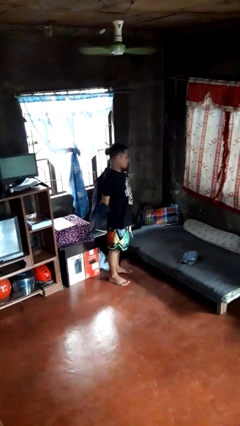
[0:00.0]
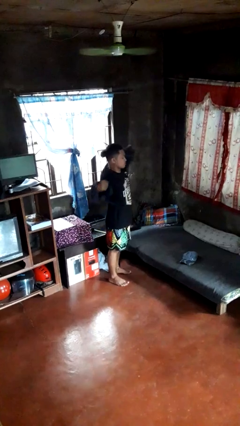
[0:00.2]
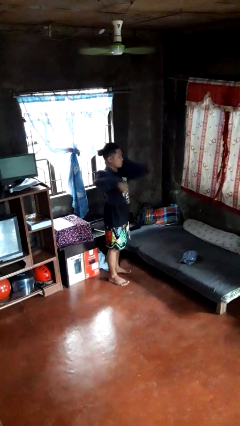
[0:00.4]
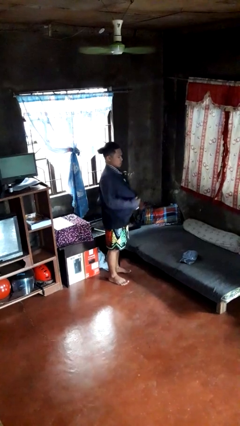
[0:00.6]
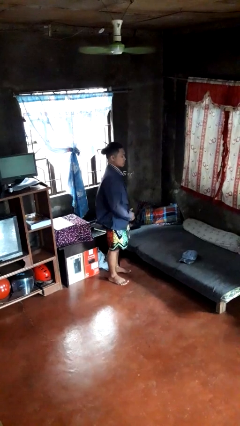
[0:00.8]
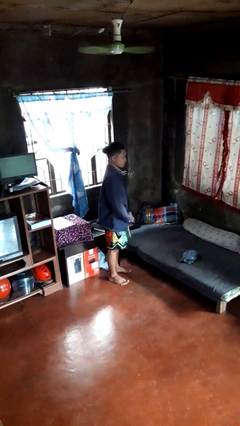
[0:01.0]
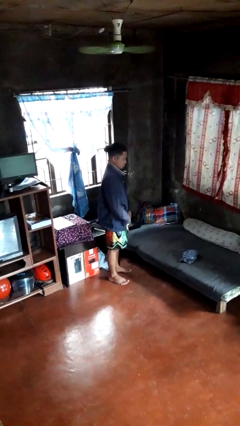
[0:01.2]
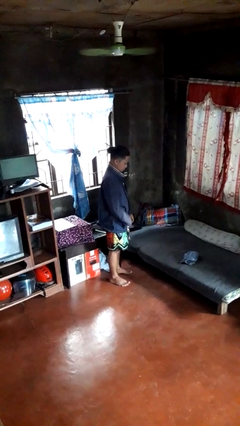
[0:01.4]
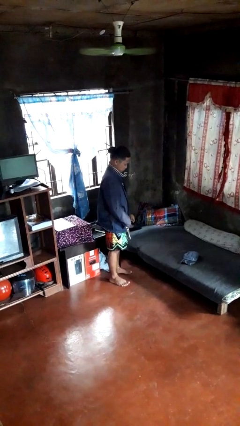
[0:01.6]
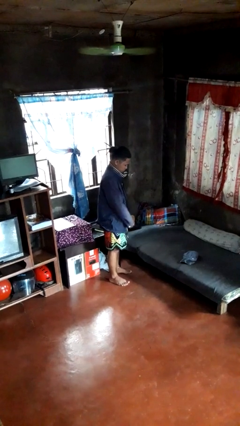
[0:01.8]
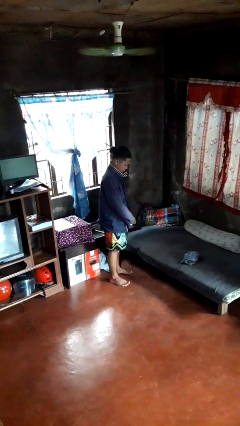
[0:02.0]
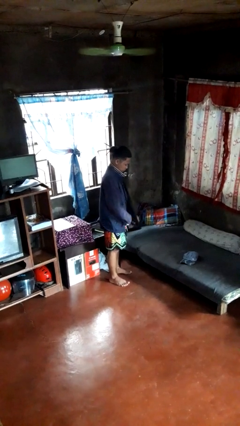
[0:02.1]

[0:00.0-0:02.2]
person puts on jacket

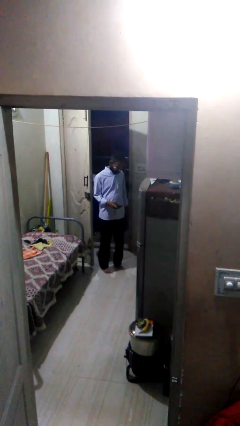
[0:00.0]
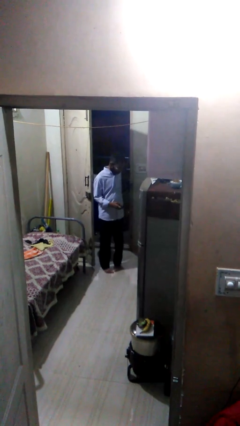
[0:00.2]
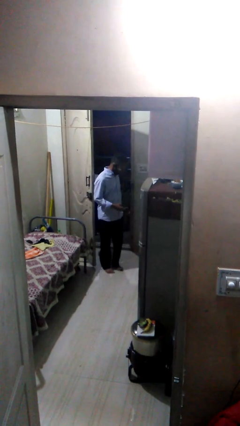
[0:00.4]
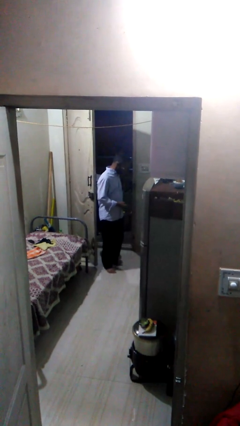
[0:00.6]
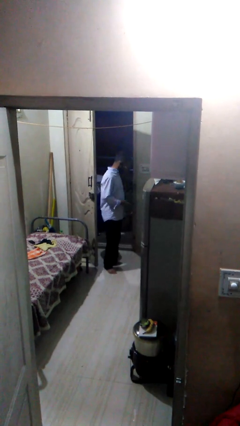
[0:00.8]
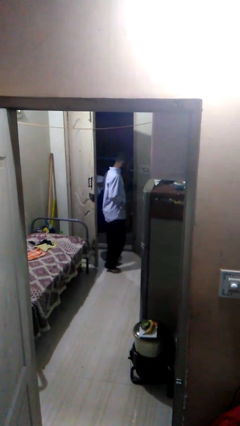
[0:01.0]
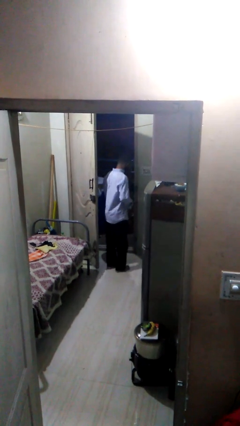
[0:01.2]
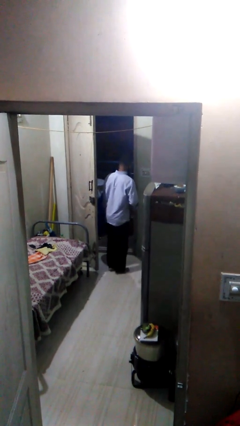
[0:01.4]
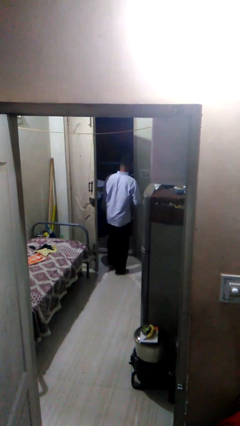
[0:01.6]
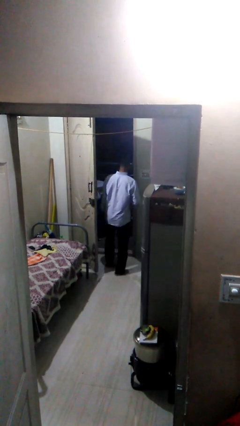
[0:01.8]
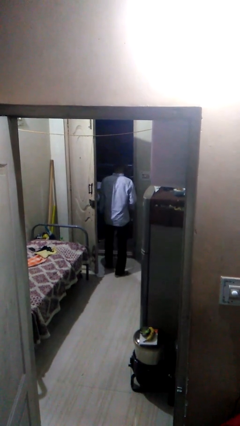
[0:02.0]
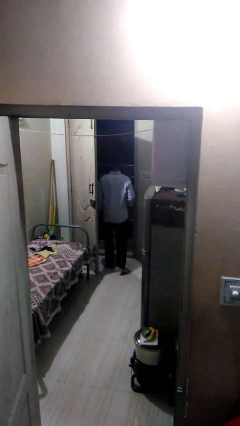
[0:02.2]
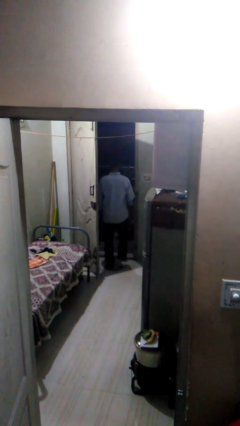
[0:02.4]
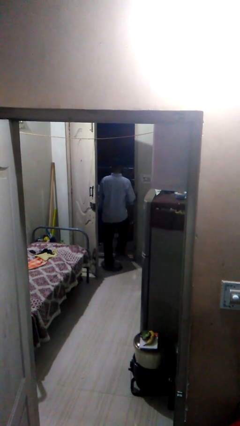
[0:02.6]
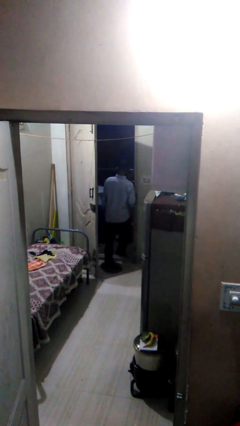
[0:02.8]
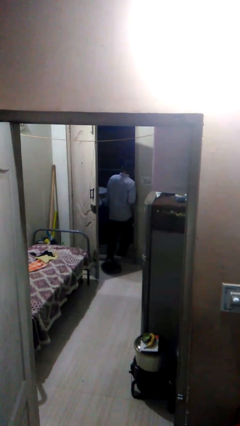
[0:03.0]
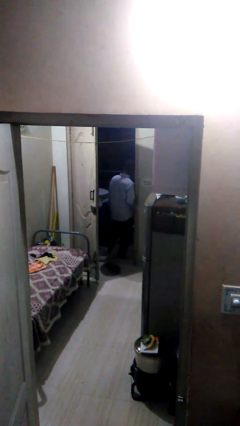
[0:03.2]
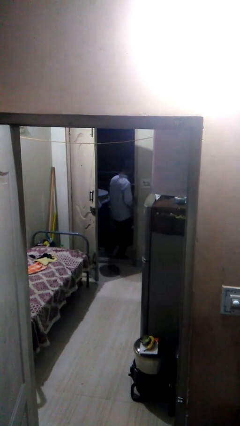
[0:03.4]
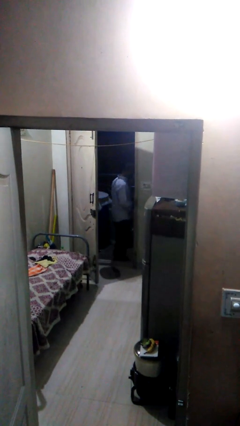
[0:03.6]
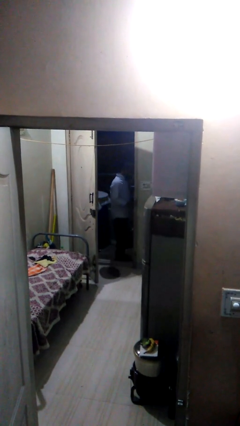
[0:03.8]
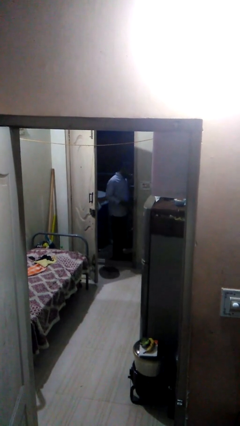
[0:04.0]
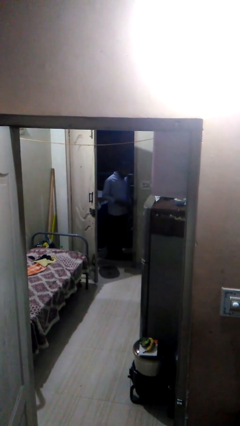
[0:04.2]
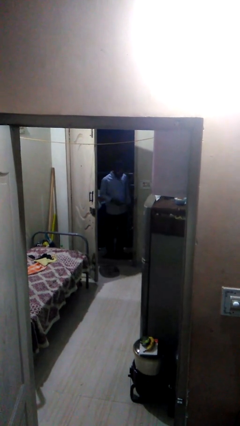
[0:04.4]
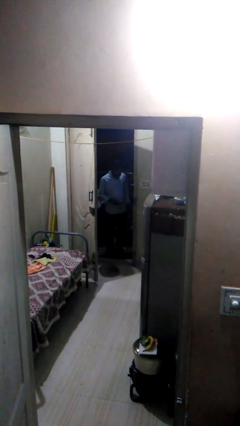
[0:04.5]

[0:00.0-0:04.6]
person exits scene through structure

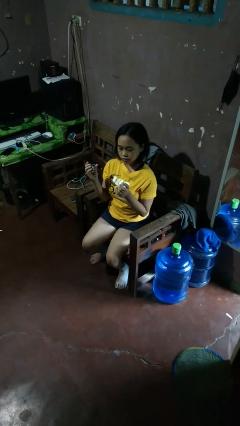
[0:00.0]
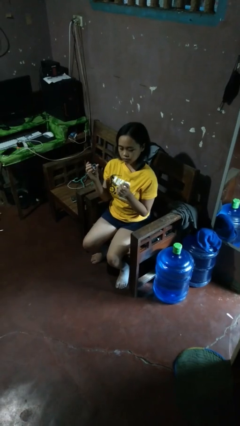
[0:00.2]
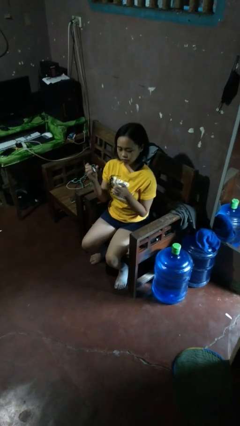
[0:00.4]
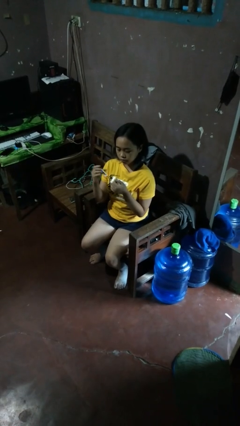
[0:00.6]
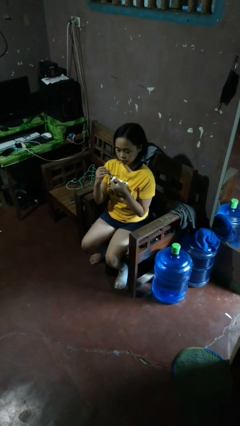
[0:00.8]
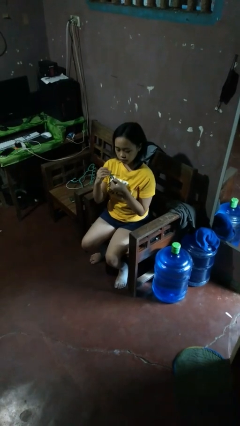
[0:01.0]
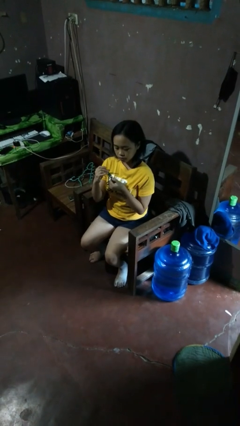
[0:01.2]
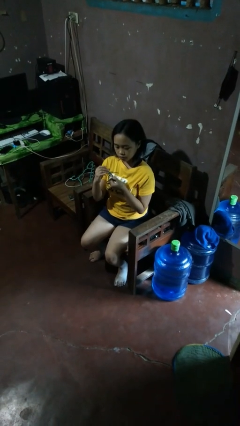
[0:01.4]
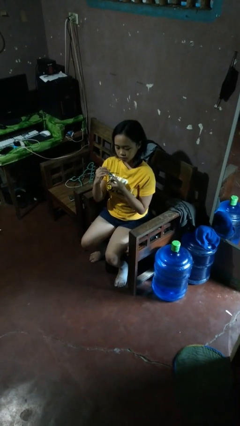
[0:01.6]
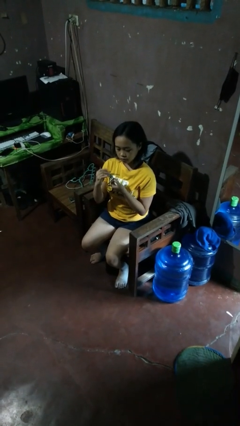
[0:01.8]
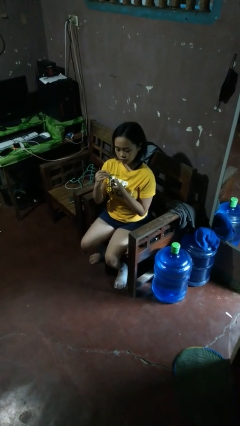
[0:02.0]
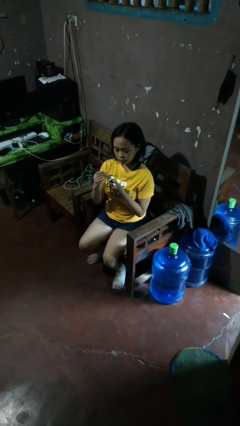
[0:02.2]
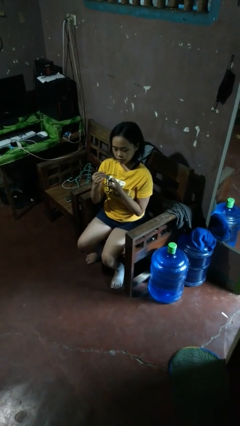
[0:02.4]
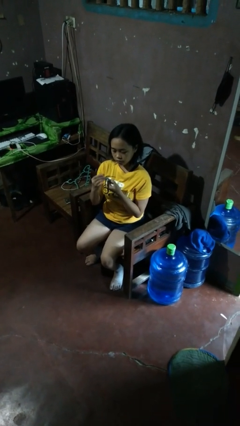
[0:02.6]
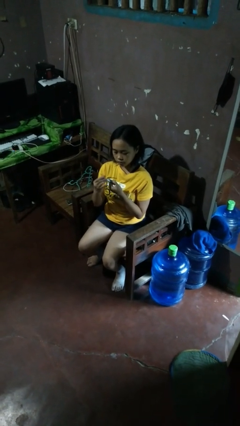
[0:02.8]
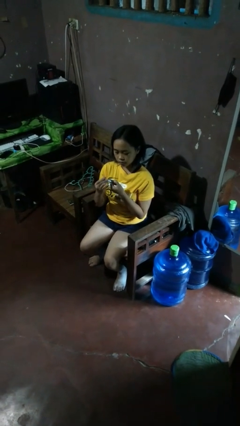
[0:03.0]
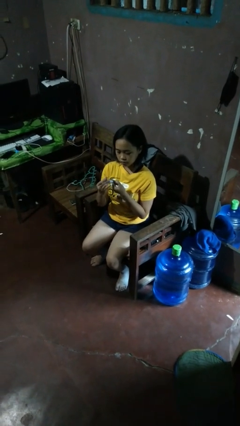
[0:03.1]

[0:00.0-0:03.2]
person clips fingernails

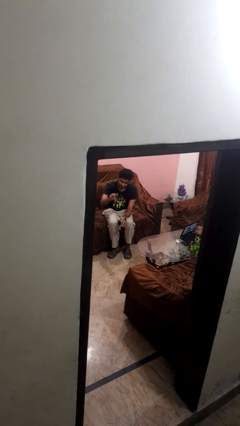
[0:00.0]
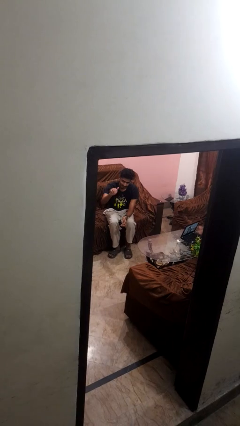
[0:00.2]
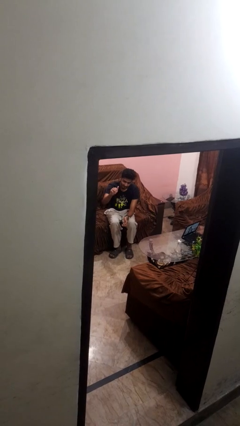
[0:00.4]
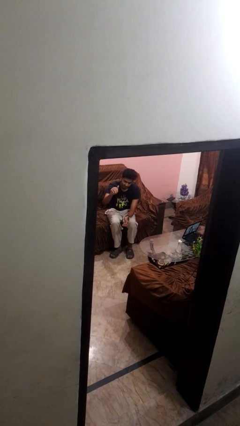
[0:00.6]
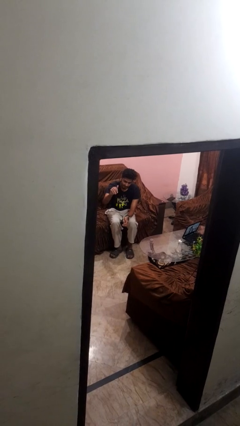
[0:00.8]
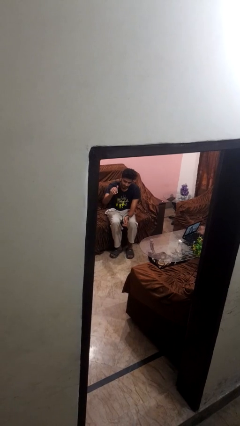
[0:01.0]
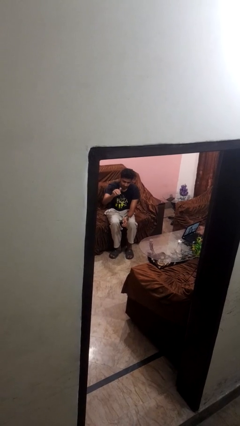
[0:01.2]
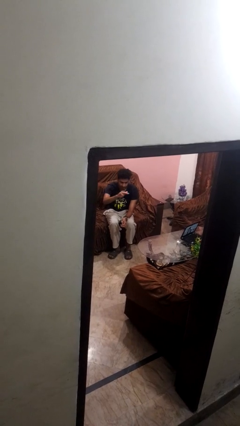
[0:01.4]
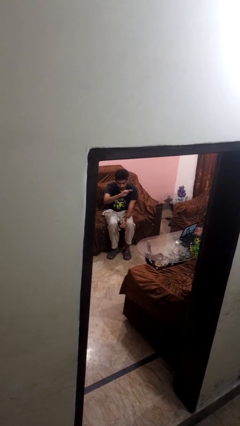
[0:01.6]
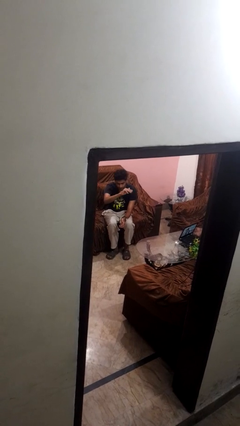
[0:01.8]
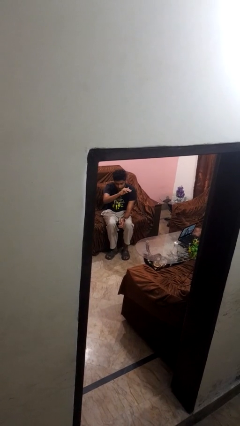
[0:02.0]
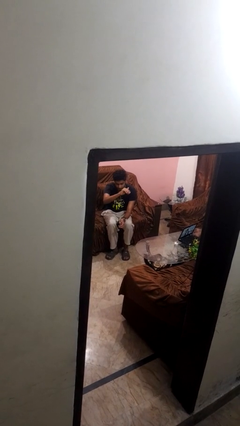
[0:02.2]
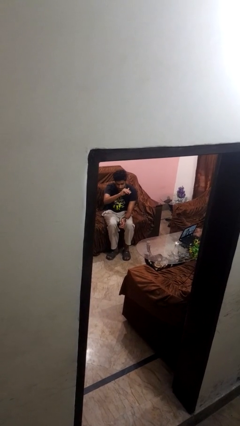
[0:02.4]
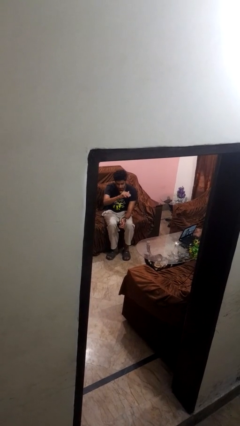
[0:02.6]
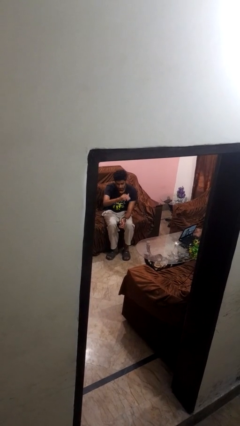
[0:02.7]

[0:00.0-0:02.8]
person gestures come here

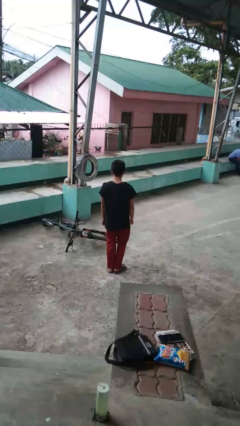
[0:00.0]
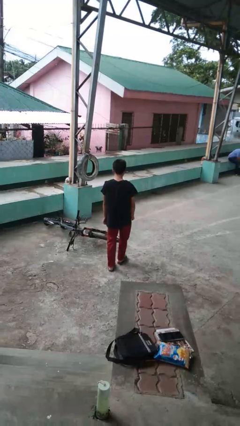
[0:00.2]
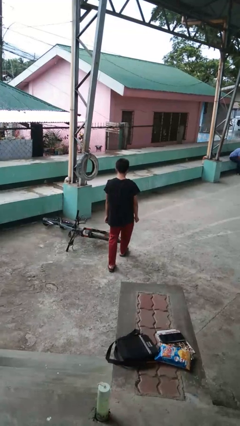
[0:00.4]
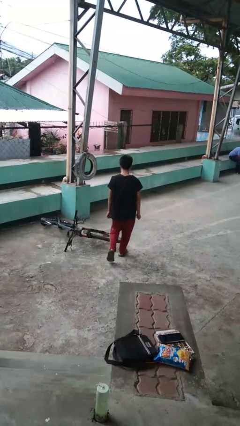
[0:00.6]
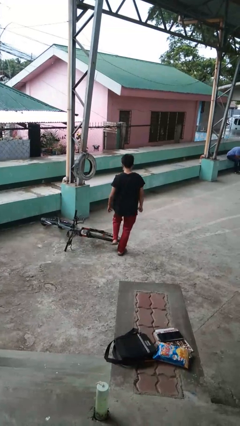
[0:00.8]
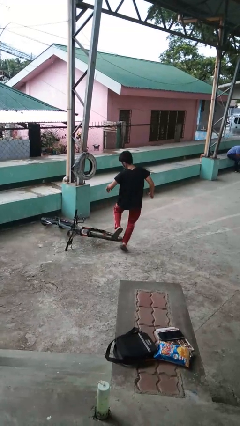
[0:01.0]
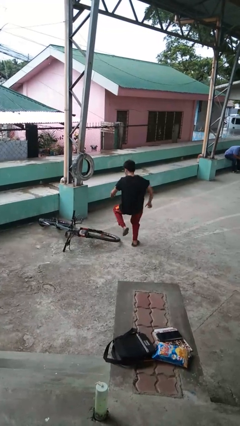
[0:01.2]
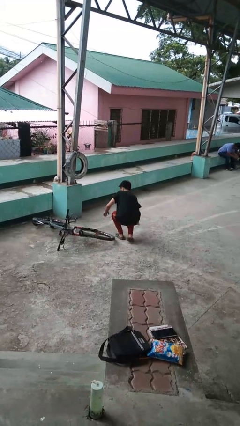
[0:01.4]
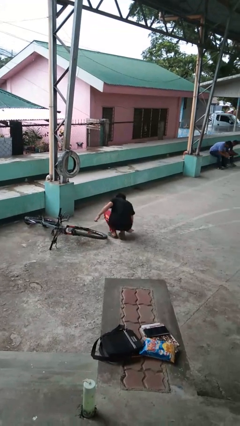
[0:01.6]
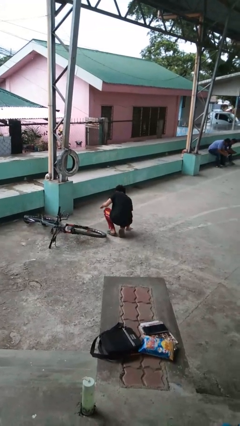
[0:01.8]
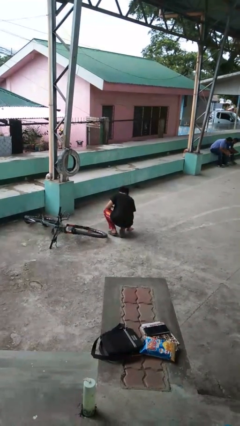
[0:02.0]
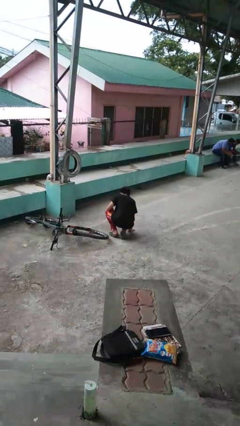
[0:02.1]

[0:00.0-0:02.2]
person trips on object on floor

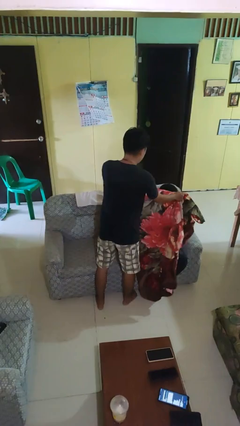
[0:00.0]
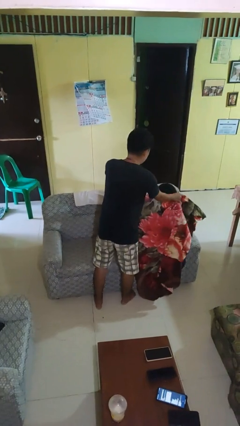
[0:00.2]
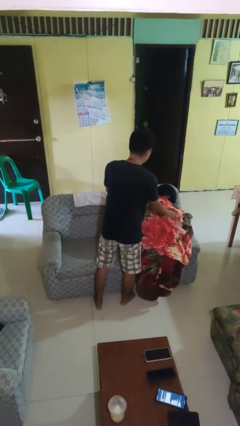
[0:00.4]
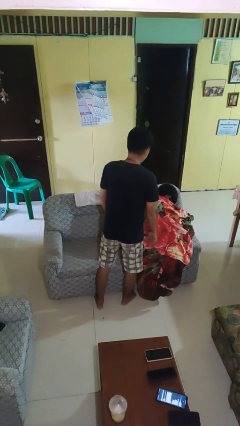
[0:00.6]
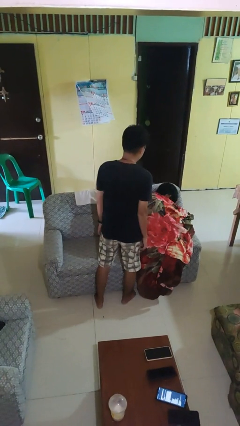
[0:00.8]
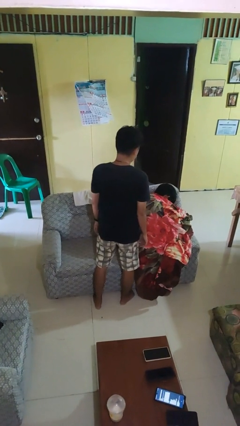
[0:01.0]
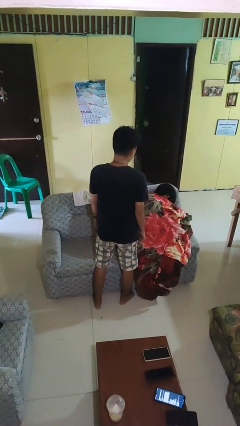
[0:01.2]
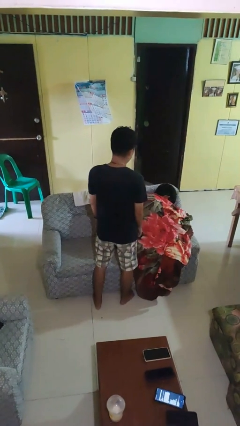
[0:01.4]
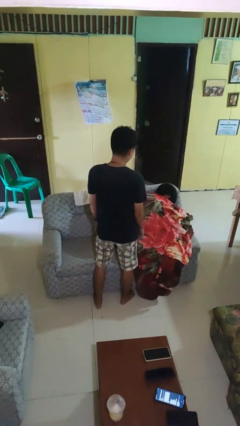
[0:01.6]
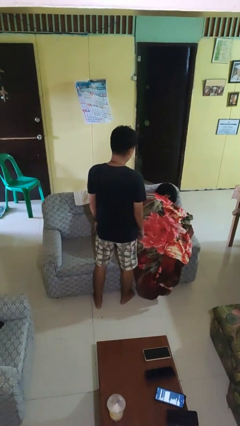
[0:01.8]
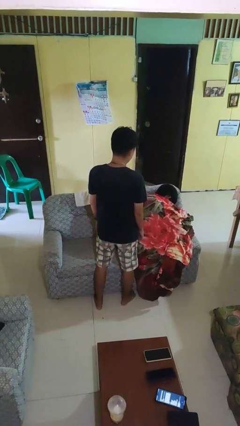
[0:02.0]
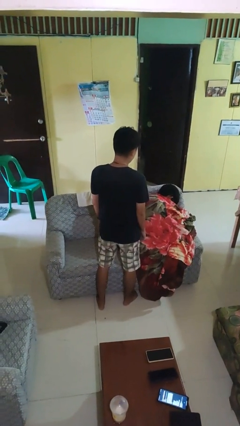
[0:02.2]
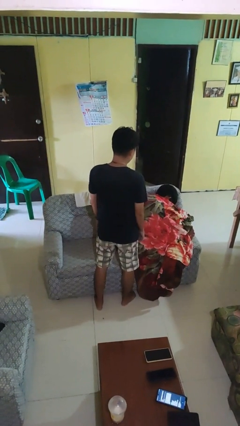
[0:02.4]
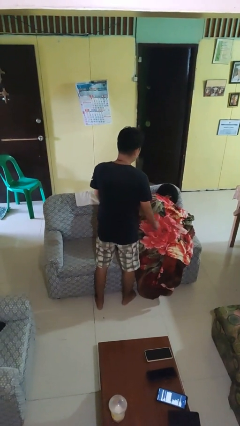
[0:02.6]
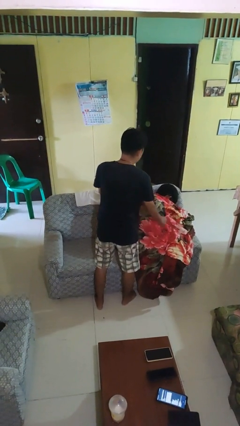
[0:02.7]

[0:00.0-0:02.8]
person covers friend with blanket
